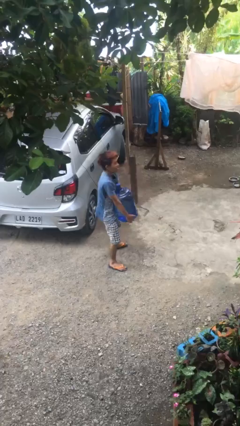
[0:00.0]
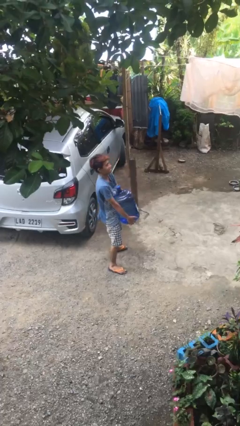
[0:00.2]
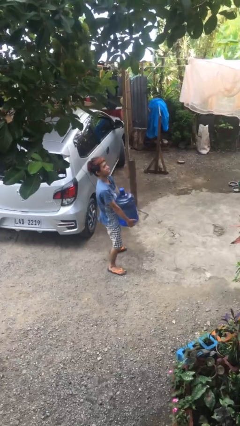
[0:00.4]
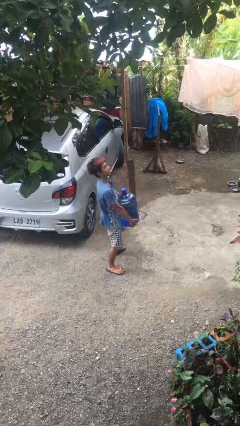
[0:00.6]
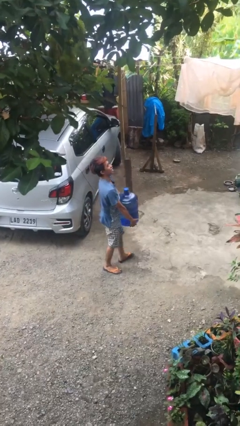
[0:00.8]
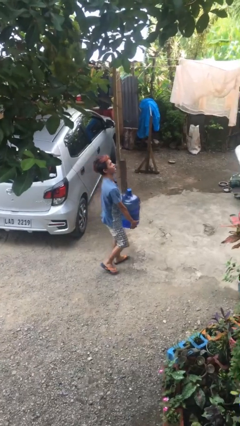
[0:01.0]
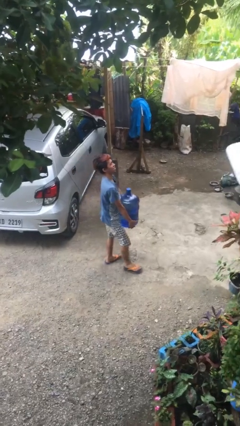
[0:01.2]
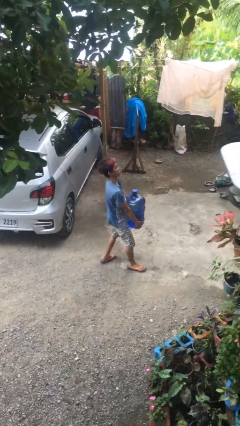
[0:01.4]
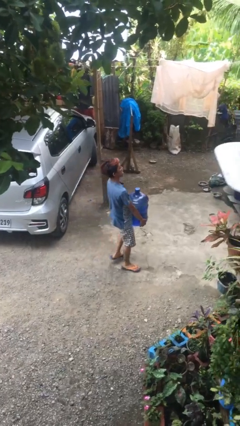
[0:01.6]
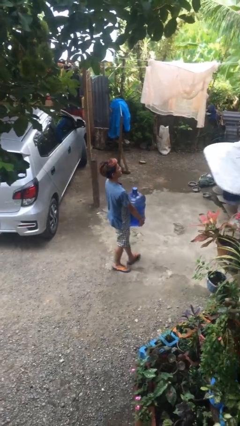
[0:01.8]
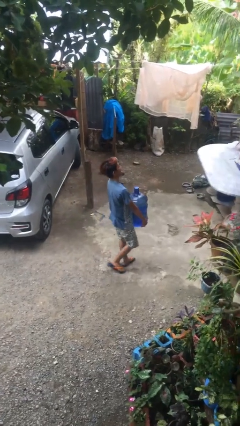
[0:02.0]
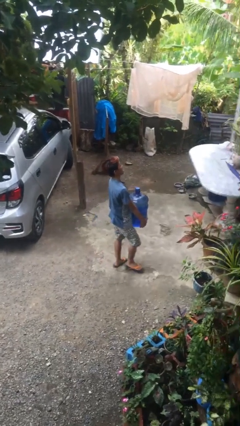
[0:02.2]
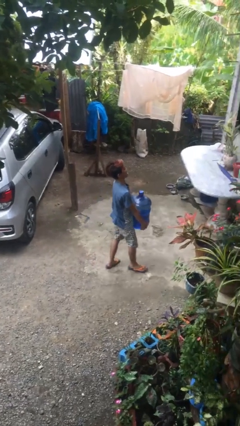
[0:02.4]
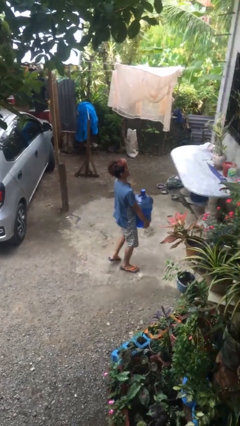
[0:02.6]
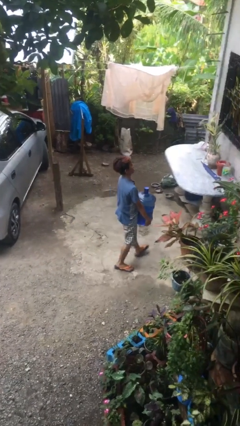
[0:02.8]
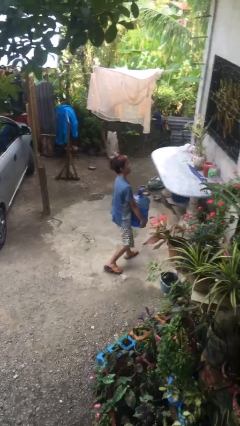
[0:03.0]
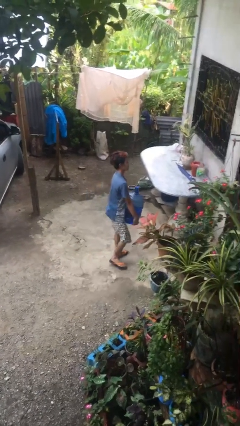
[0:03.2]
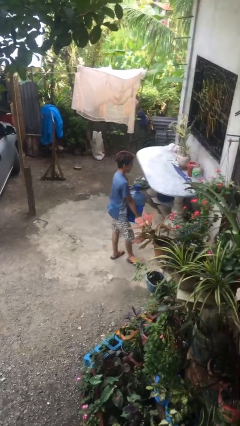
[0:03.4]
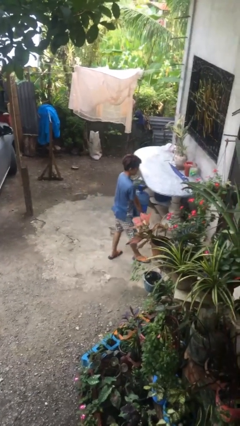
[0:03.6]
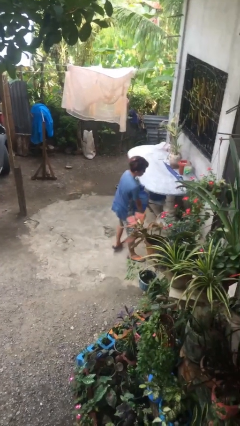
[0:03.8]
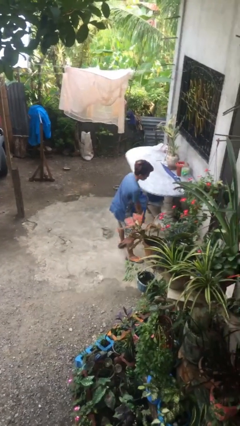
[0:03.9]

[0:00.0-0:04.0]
person carries heavy object

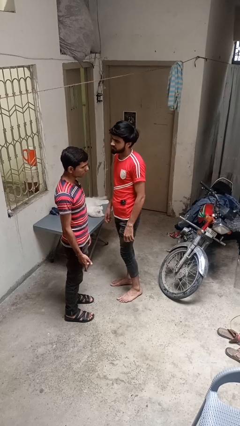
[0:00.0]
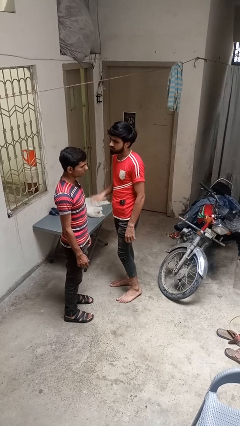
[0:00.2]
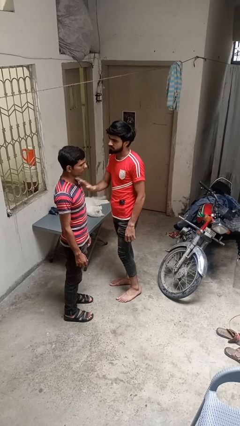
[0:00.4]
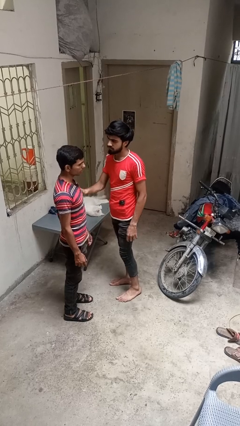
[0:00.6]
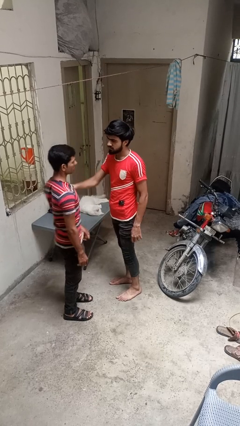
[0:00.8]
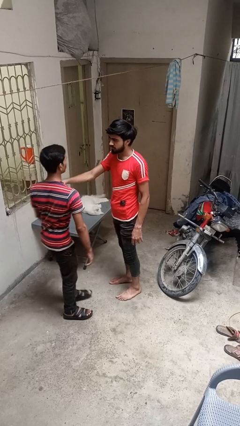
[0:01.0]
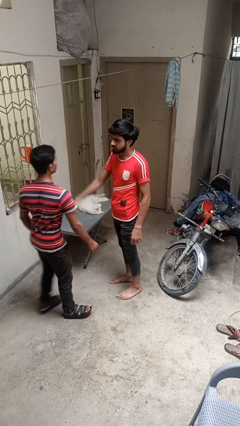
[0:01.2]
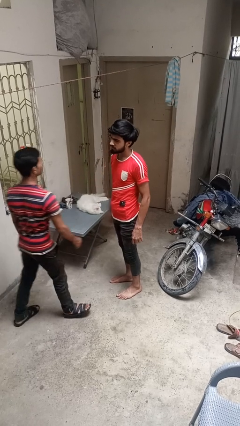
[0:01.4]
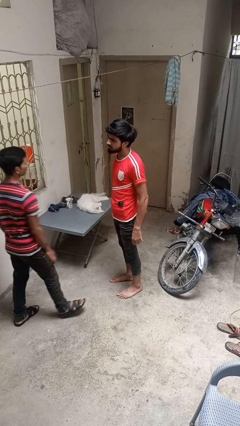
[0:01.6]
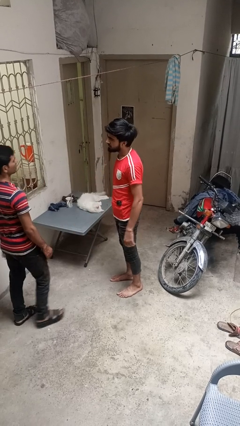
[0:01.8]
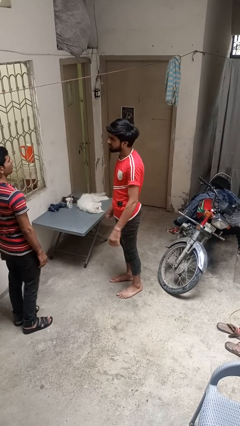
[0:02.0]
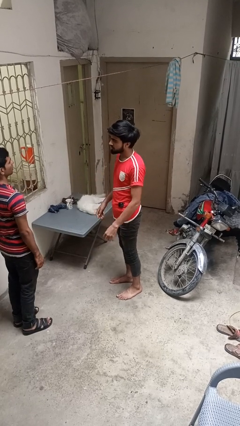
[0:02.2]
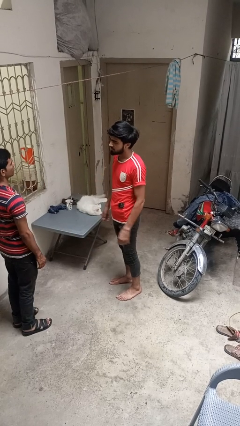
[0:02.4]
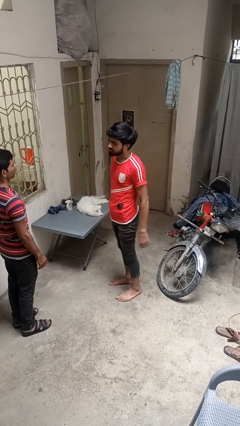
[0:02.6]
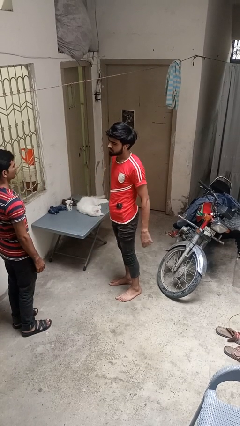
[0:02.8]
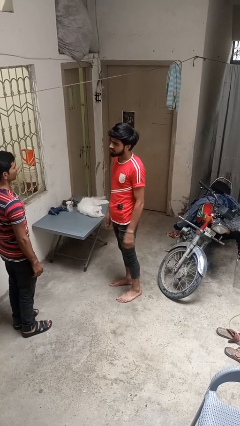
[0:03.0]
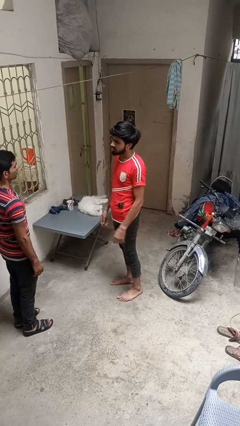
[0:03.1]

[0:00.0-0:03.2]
person shoves person

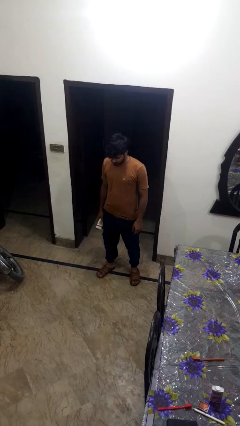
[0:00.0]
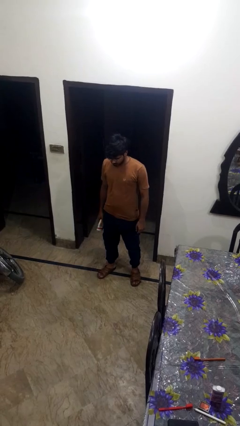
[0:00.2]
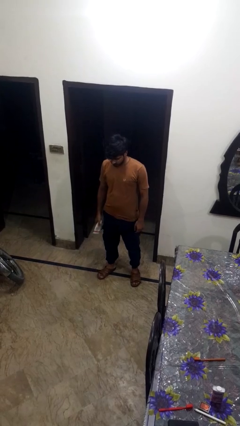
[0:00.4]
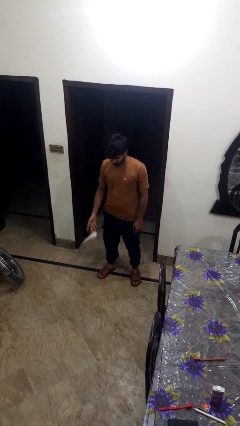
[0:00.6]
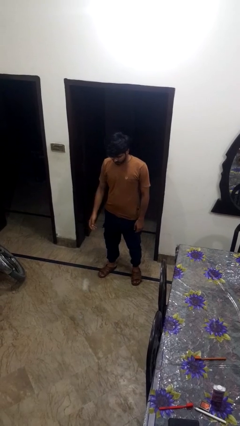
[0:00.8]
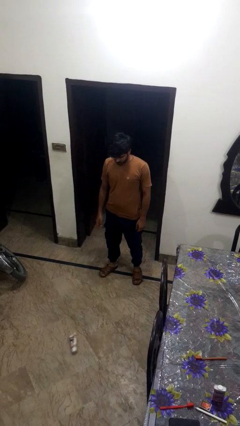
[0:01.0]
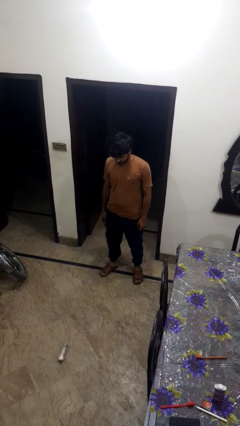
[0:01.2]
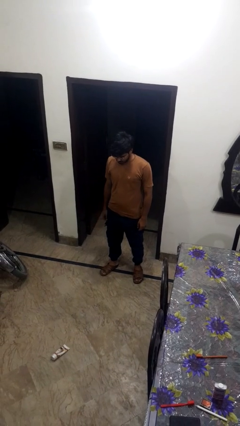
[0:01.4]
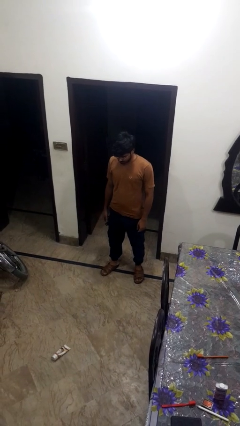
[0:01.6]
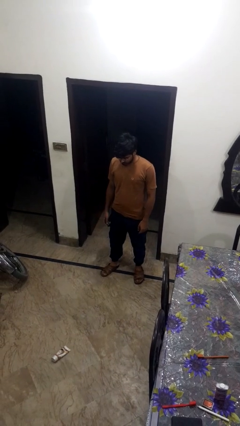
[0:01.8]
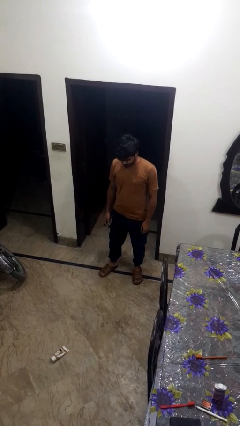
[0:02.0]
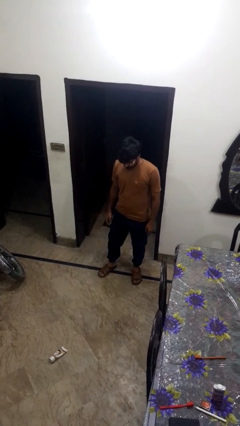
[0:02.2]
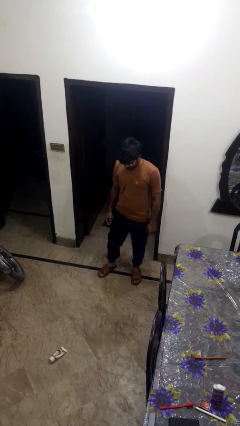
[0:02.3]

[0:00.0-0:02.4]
person throws object to ground

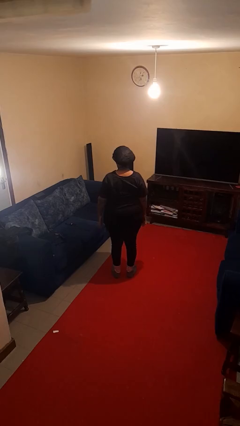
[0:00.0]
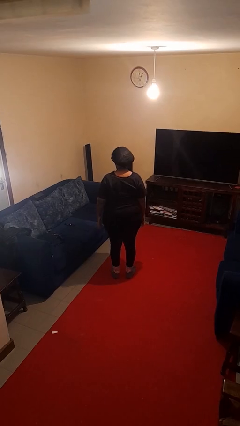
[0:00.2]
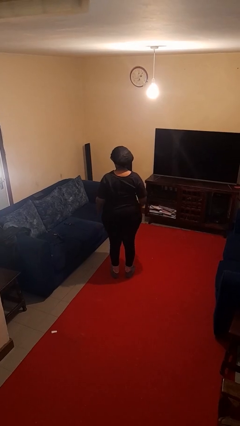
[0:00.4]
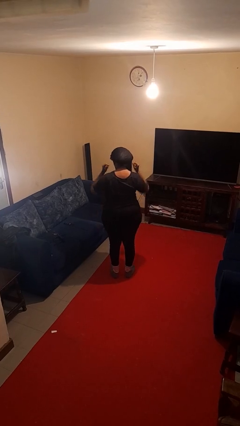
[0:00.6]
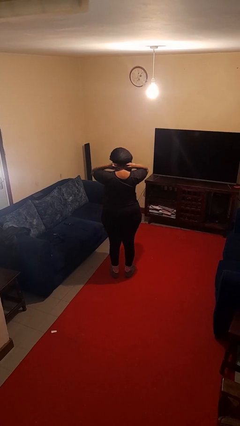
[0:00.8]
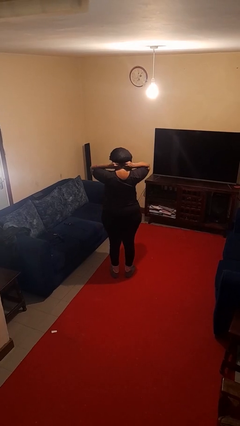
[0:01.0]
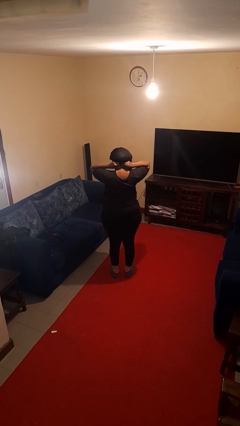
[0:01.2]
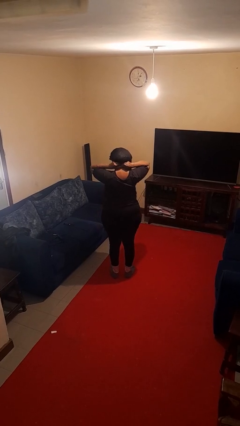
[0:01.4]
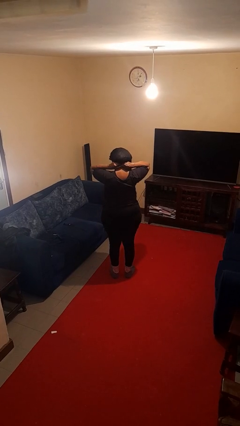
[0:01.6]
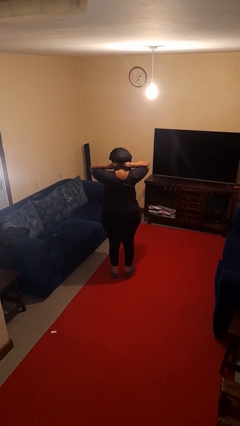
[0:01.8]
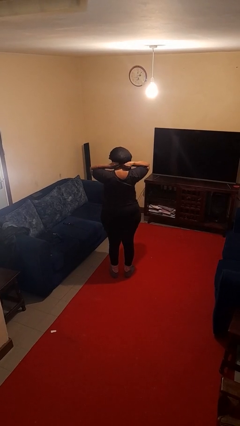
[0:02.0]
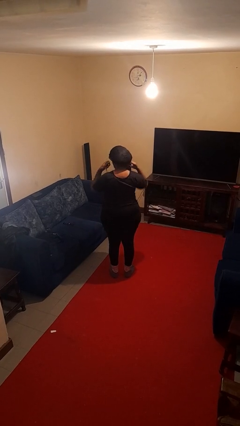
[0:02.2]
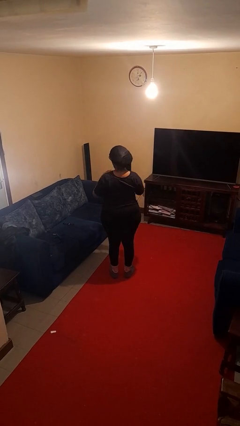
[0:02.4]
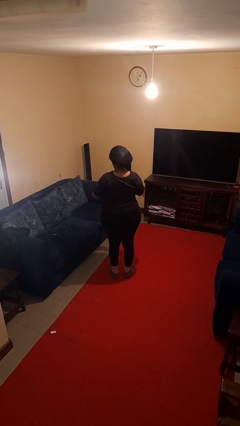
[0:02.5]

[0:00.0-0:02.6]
person takes off necklace

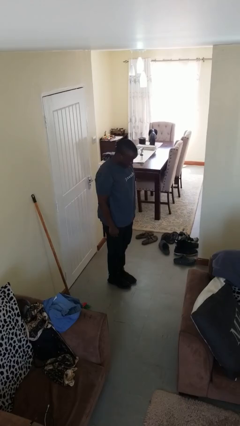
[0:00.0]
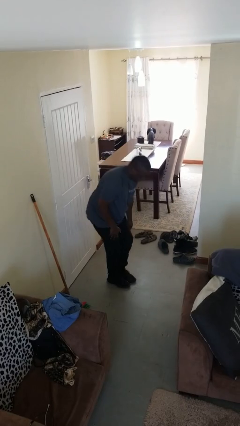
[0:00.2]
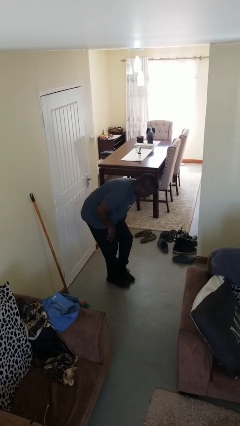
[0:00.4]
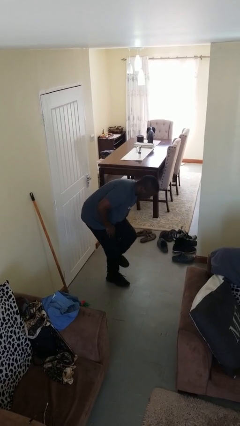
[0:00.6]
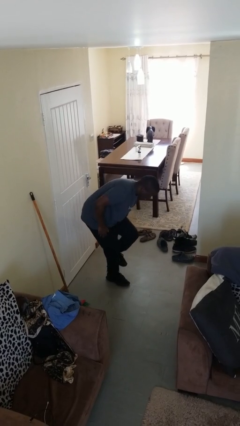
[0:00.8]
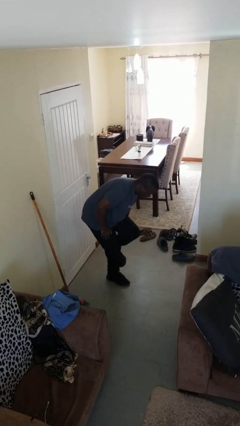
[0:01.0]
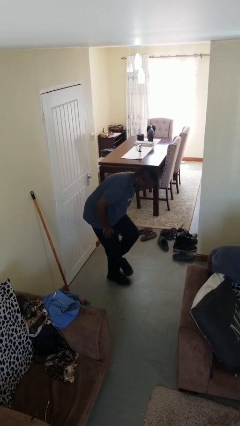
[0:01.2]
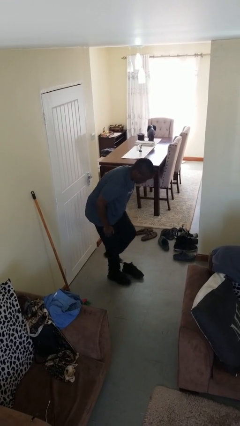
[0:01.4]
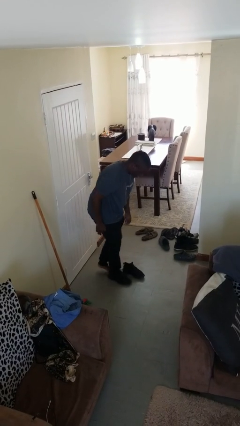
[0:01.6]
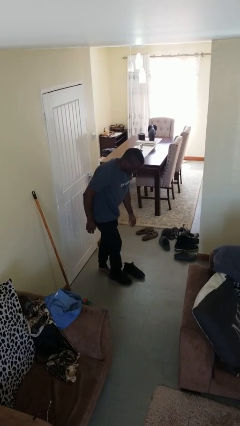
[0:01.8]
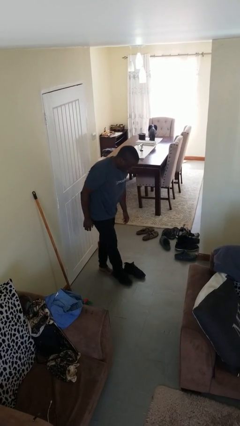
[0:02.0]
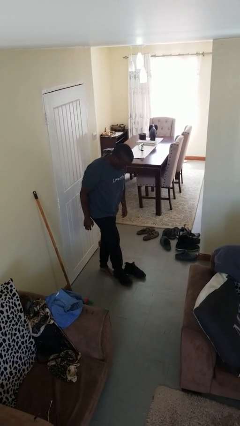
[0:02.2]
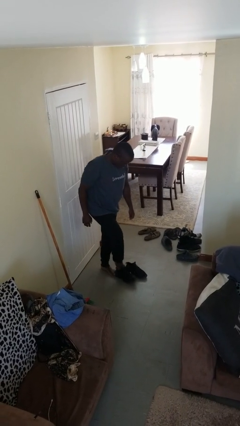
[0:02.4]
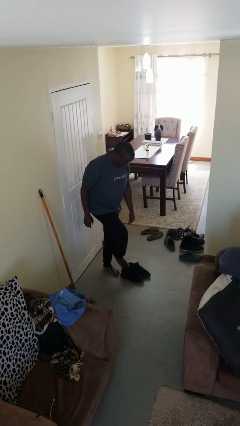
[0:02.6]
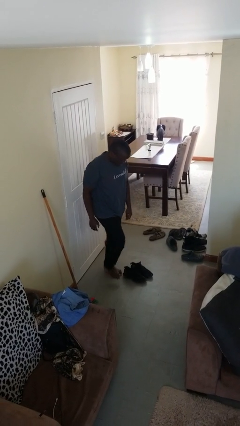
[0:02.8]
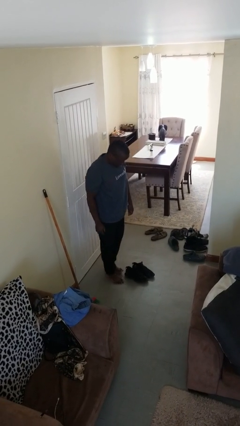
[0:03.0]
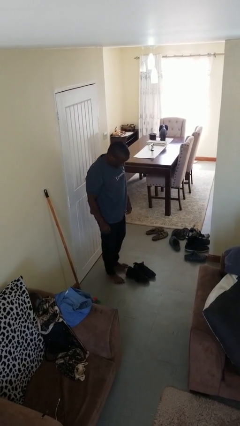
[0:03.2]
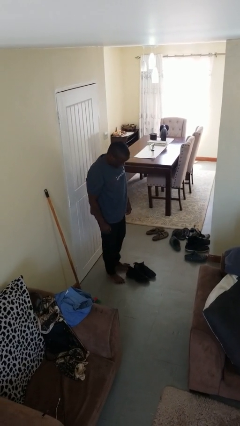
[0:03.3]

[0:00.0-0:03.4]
person takes off shoes

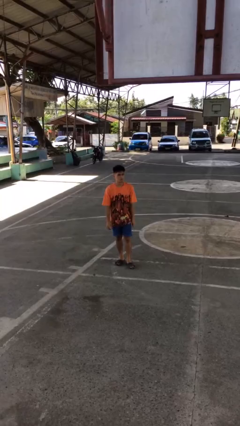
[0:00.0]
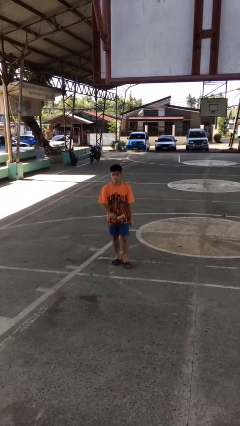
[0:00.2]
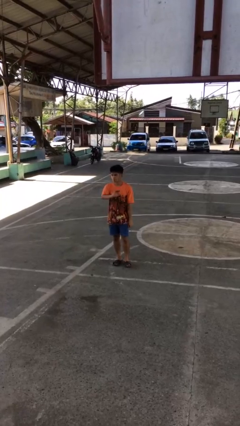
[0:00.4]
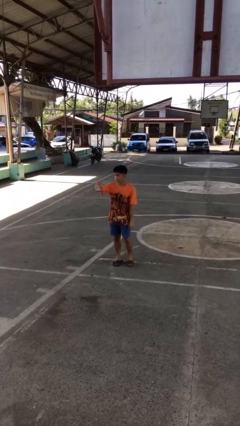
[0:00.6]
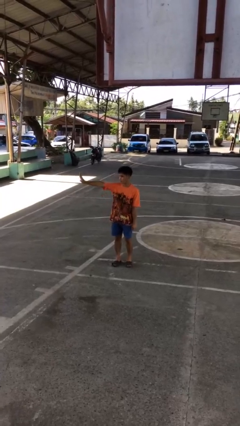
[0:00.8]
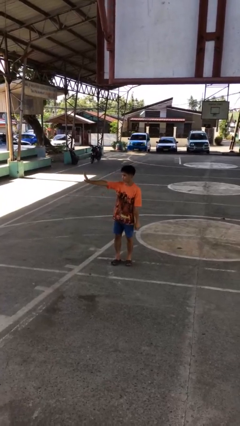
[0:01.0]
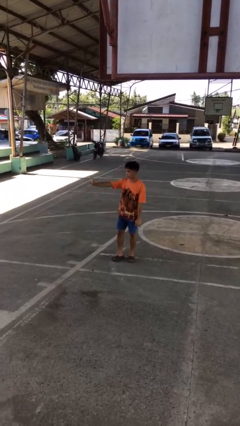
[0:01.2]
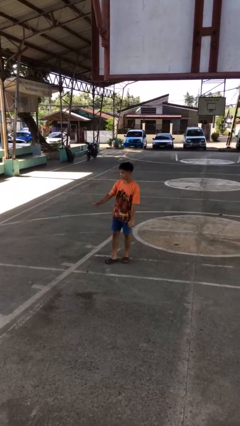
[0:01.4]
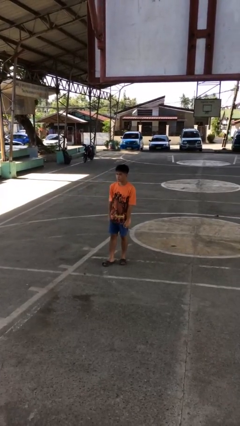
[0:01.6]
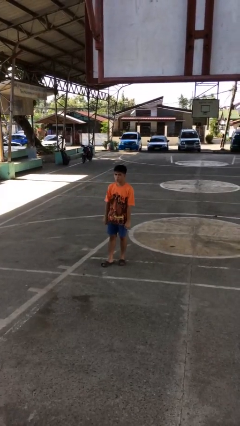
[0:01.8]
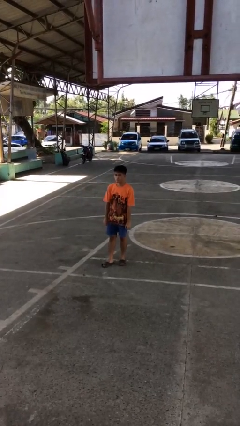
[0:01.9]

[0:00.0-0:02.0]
person gestures swipe right

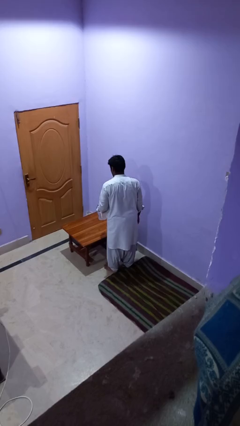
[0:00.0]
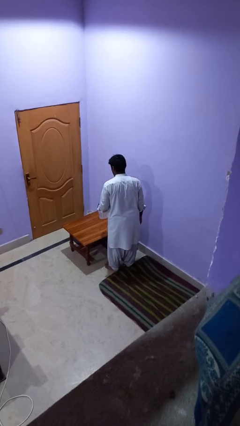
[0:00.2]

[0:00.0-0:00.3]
person sprays from bottle
